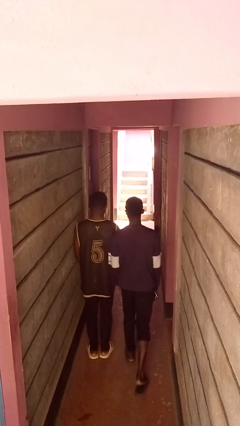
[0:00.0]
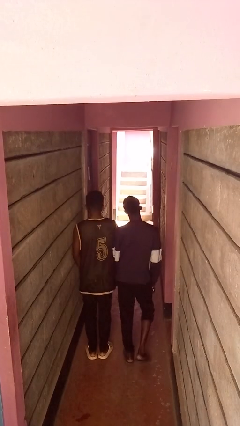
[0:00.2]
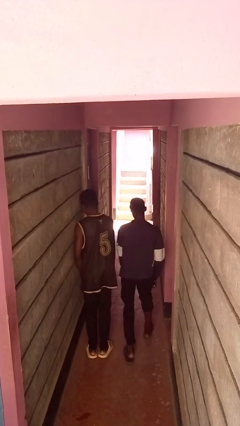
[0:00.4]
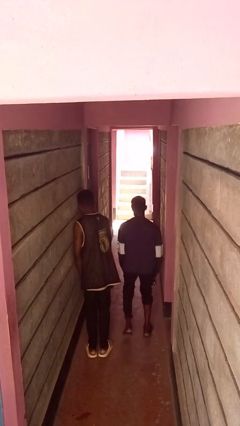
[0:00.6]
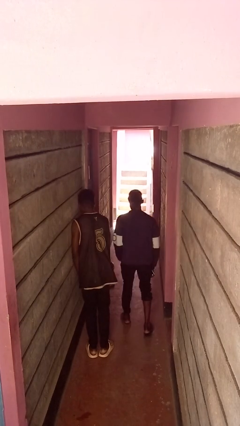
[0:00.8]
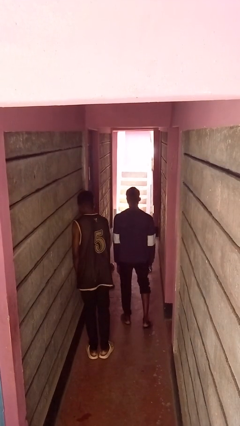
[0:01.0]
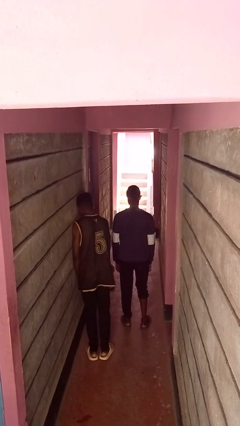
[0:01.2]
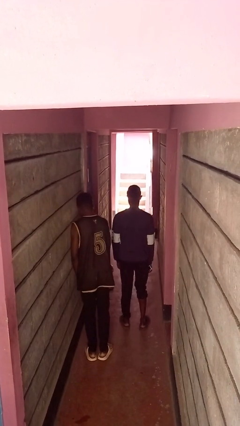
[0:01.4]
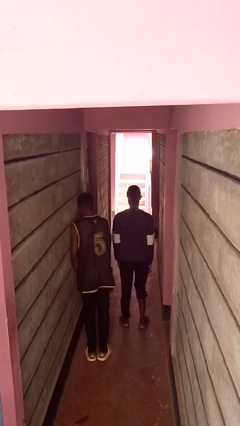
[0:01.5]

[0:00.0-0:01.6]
person bumps into person

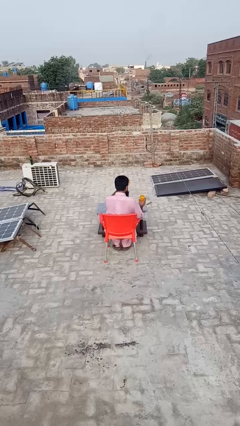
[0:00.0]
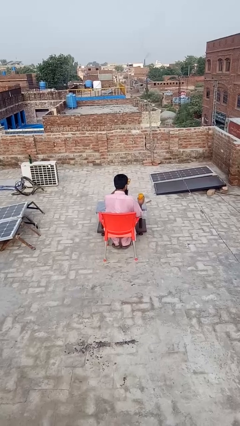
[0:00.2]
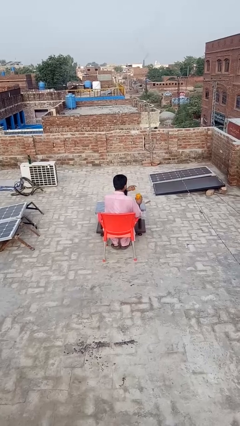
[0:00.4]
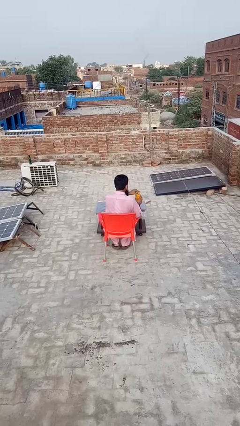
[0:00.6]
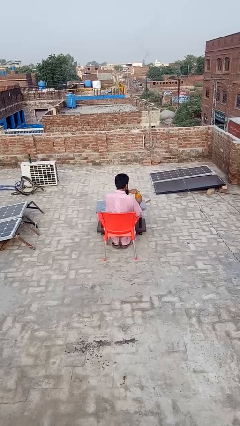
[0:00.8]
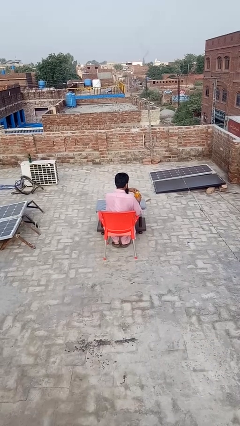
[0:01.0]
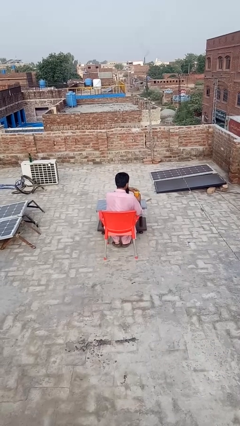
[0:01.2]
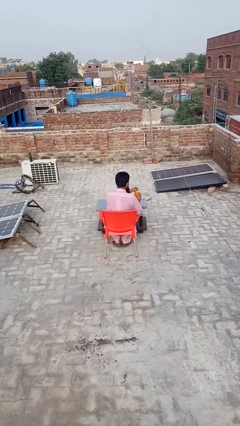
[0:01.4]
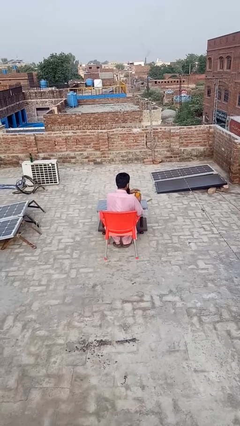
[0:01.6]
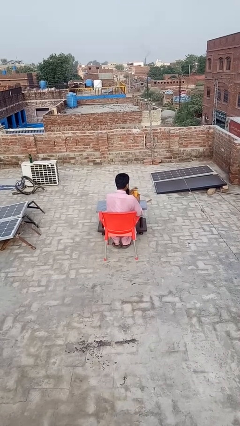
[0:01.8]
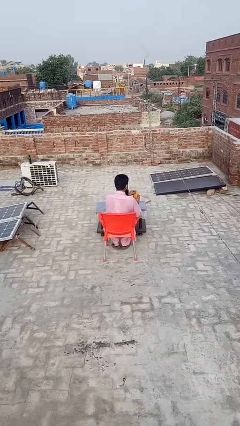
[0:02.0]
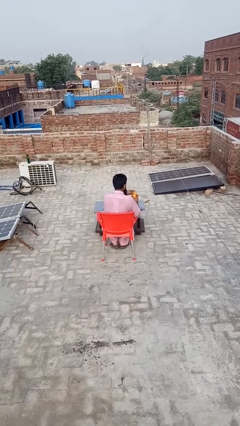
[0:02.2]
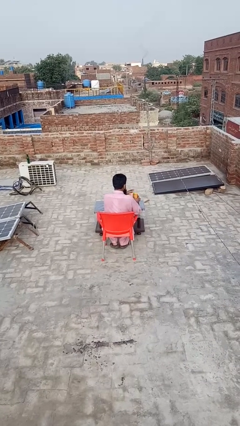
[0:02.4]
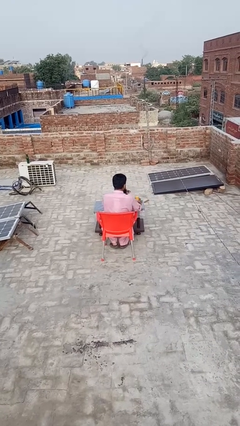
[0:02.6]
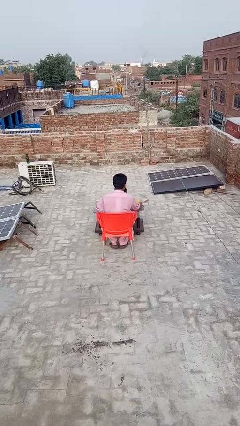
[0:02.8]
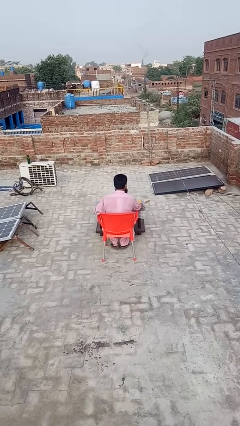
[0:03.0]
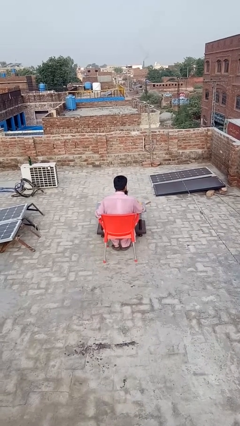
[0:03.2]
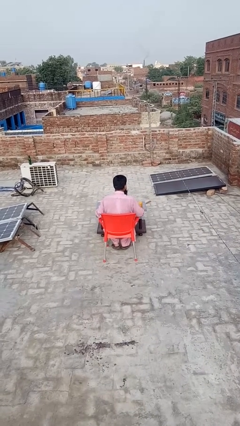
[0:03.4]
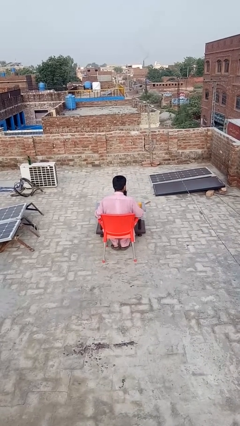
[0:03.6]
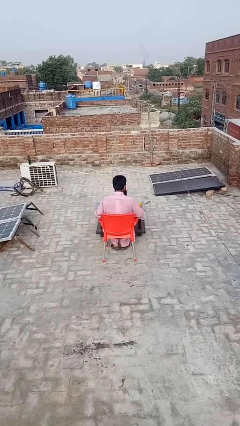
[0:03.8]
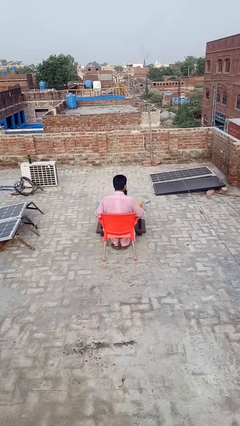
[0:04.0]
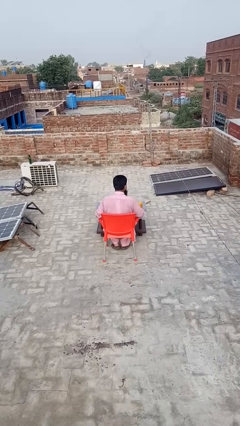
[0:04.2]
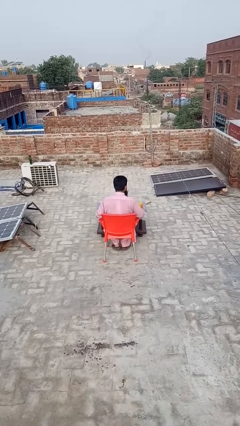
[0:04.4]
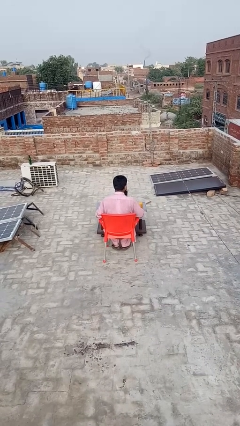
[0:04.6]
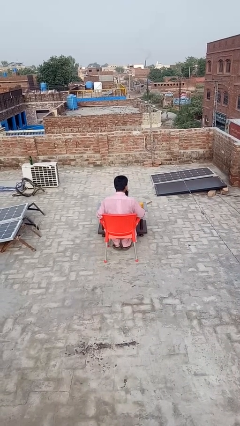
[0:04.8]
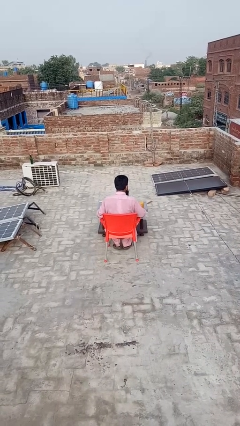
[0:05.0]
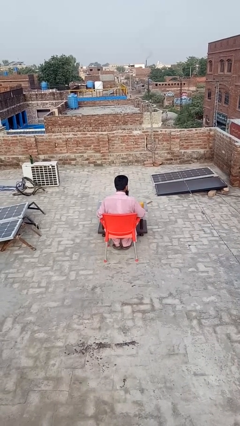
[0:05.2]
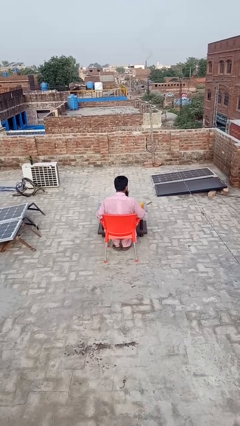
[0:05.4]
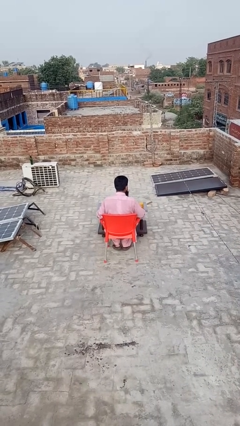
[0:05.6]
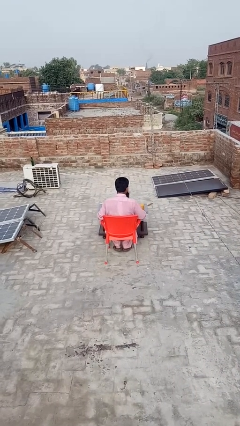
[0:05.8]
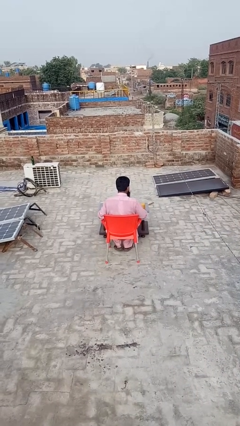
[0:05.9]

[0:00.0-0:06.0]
person closes jar

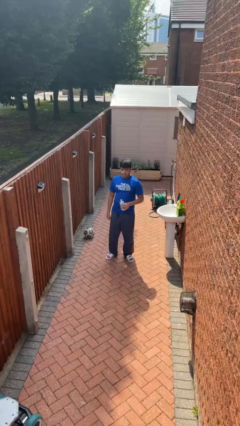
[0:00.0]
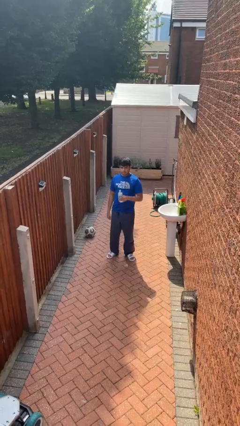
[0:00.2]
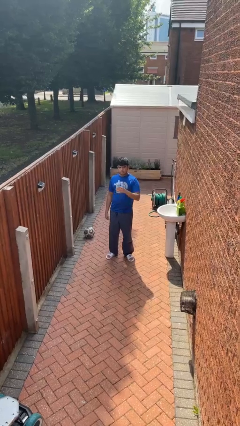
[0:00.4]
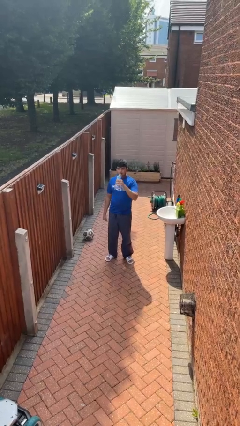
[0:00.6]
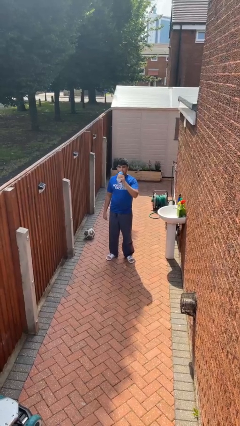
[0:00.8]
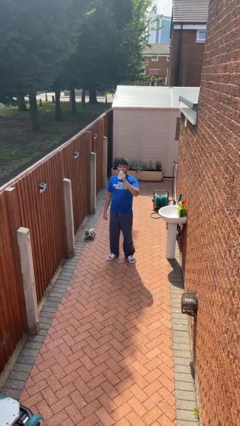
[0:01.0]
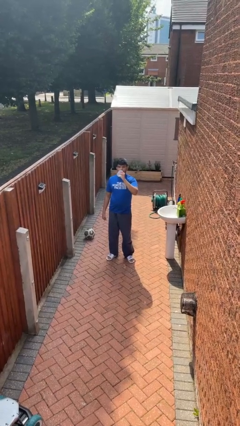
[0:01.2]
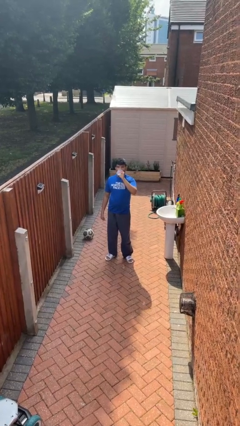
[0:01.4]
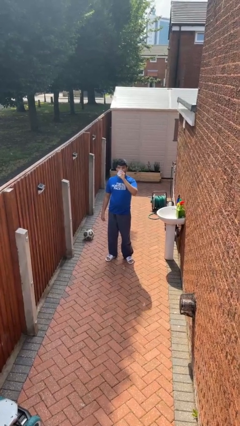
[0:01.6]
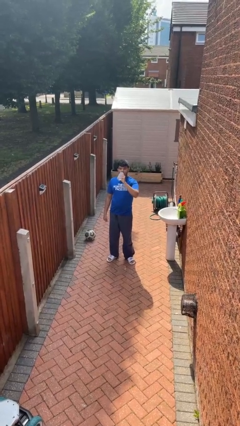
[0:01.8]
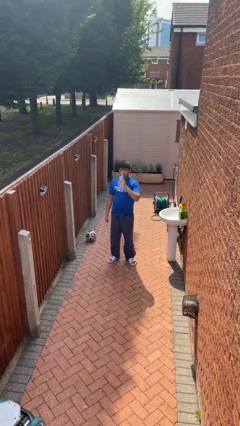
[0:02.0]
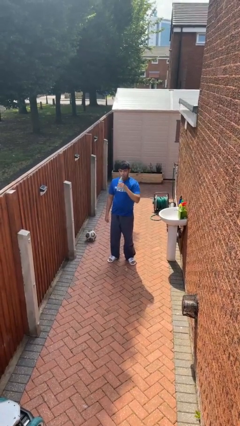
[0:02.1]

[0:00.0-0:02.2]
person drinks from bottle

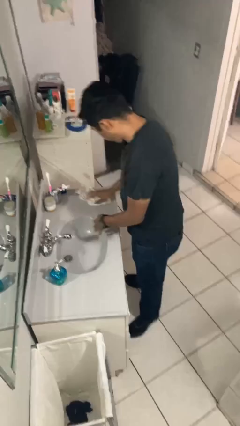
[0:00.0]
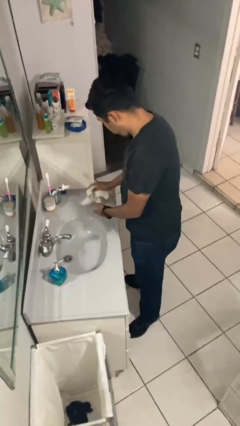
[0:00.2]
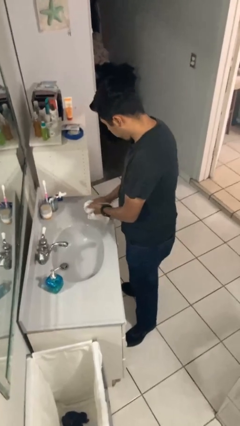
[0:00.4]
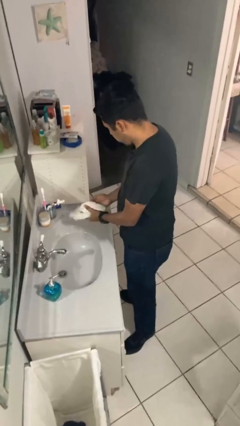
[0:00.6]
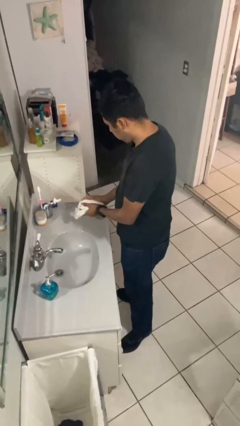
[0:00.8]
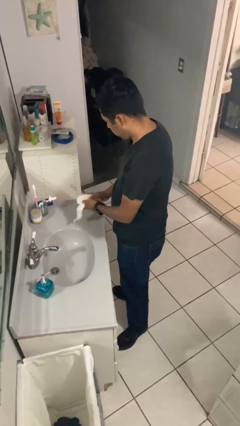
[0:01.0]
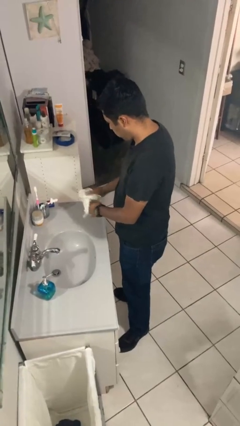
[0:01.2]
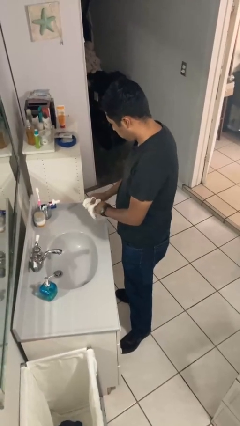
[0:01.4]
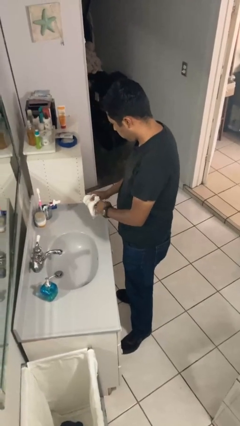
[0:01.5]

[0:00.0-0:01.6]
person dries hands with towel

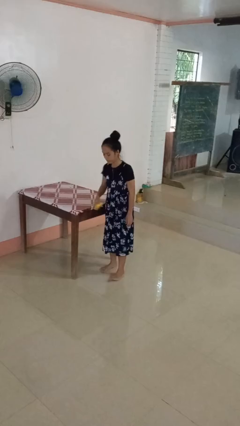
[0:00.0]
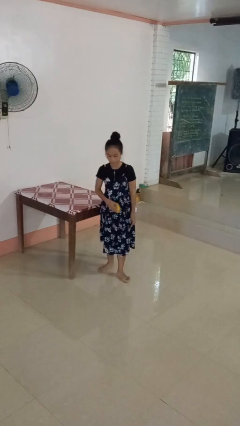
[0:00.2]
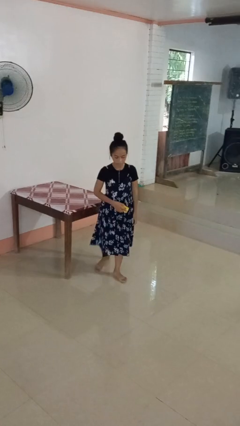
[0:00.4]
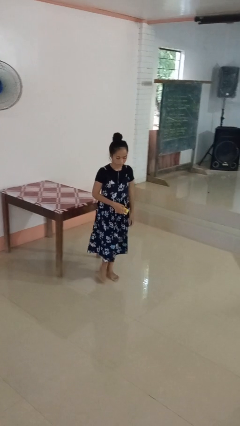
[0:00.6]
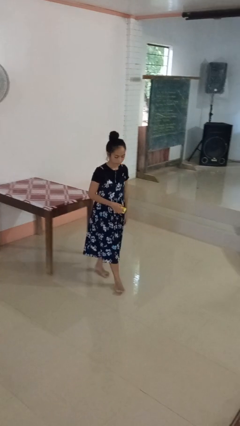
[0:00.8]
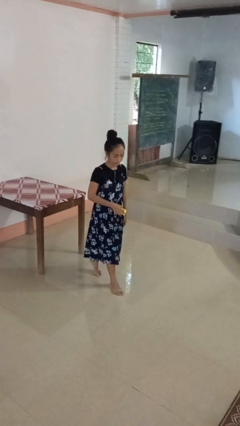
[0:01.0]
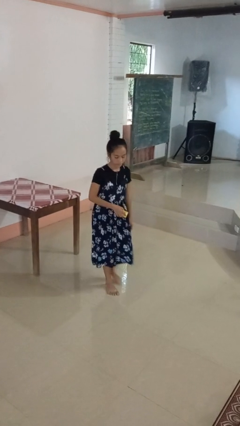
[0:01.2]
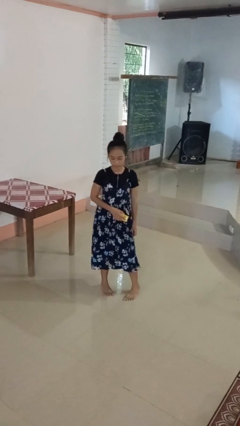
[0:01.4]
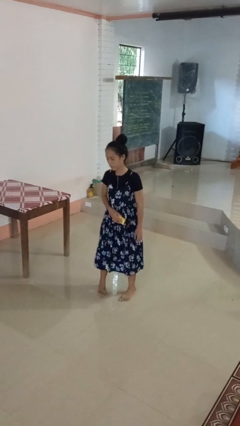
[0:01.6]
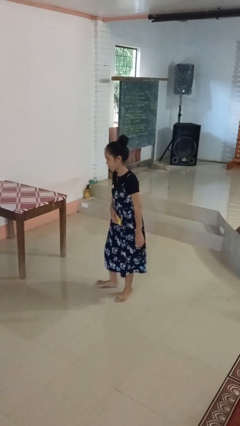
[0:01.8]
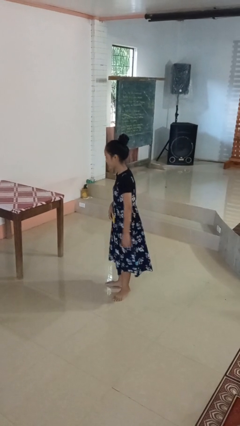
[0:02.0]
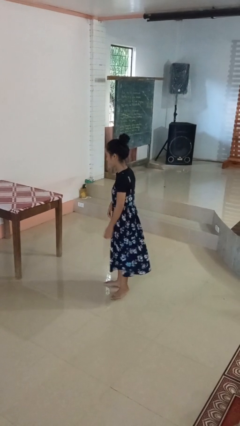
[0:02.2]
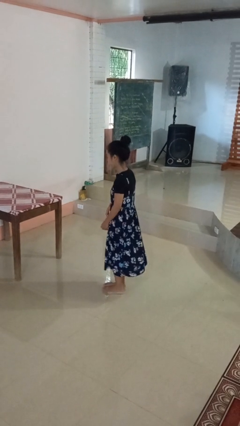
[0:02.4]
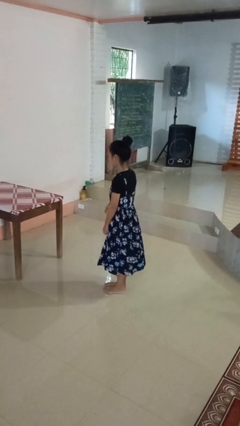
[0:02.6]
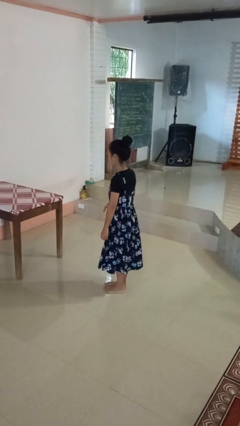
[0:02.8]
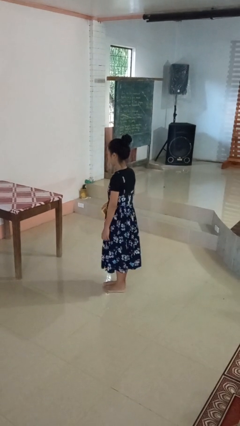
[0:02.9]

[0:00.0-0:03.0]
person picks up object from table

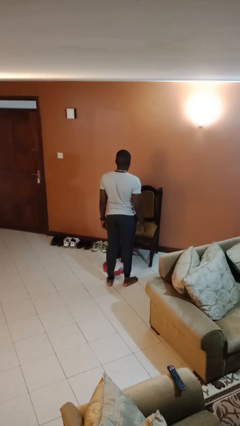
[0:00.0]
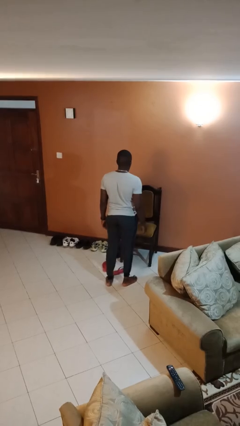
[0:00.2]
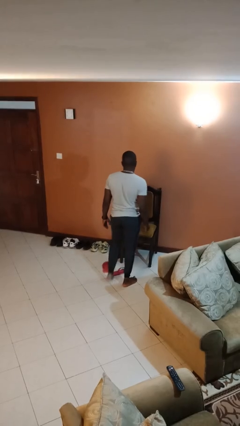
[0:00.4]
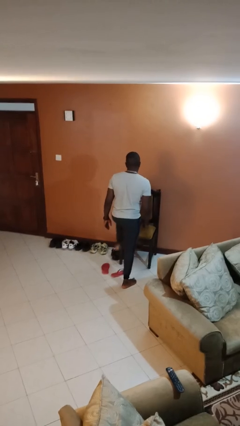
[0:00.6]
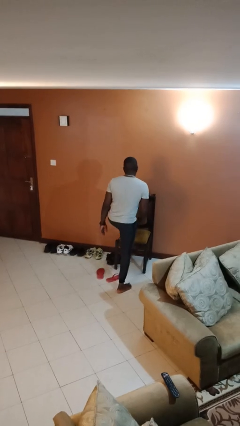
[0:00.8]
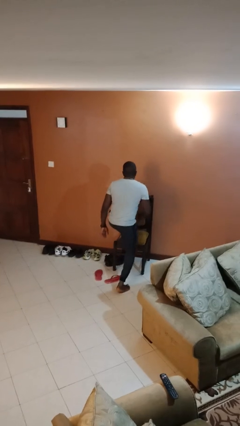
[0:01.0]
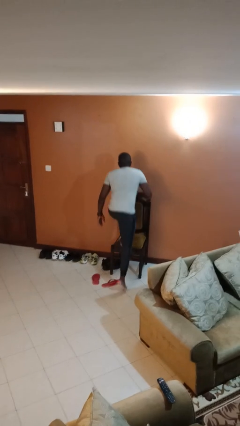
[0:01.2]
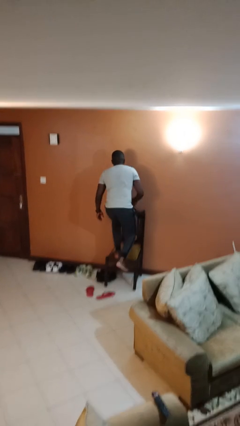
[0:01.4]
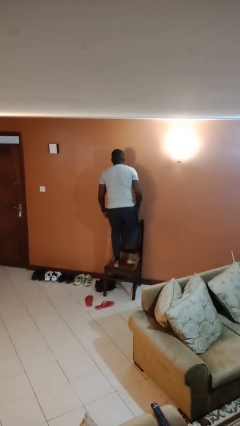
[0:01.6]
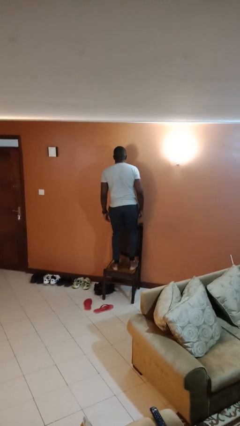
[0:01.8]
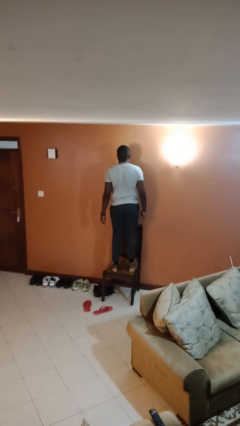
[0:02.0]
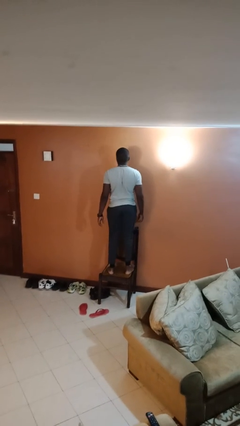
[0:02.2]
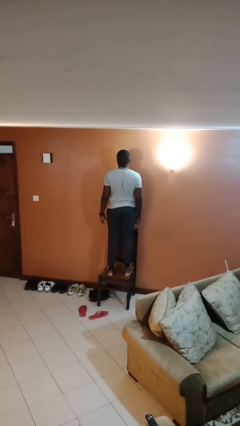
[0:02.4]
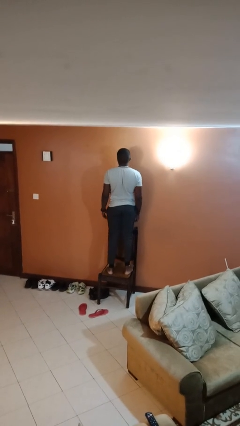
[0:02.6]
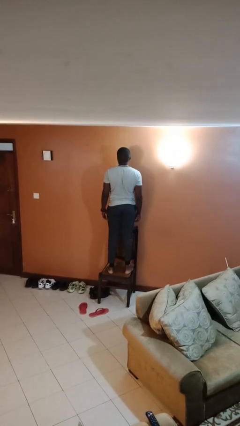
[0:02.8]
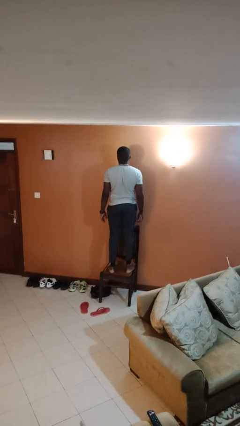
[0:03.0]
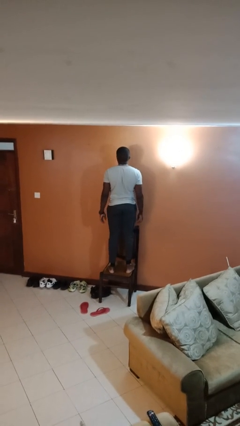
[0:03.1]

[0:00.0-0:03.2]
person climbs on chair
